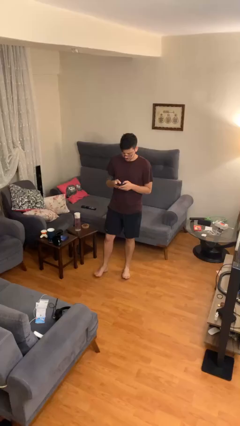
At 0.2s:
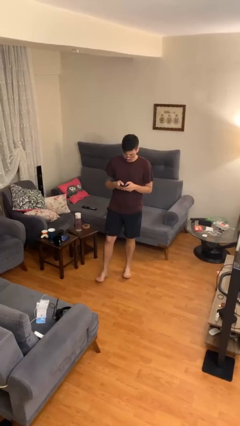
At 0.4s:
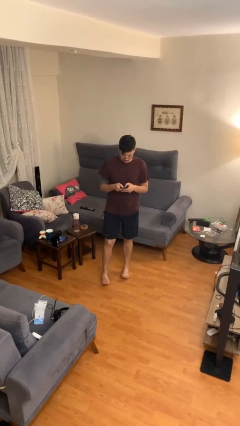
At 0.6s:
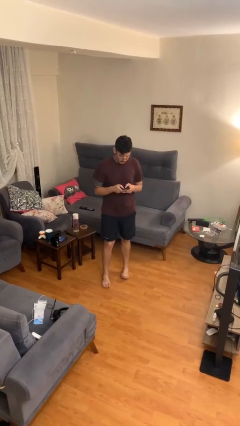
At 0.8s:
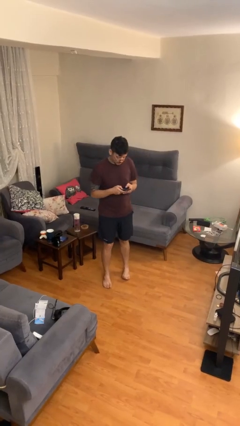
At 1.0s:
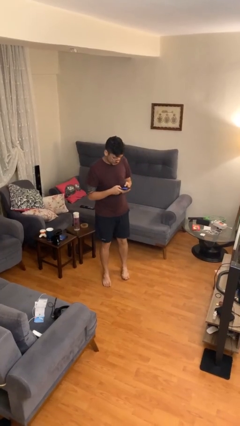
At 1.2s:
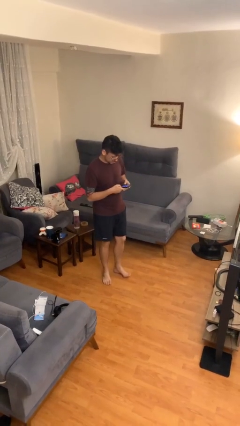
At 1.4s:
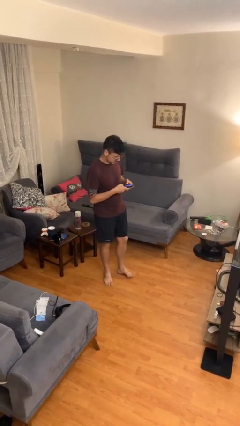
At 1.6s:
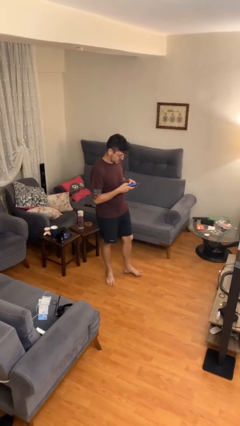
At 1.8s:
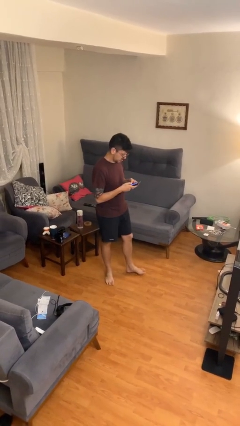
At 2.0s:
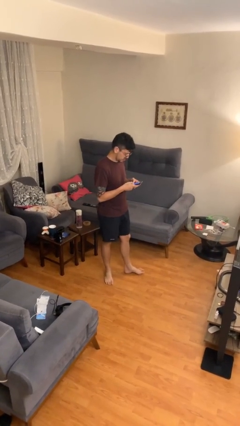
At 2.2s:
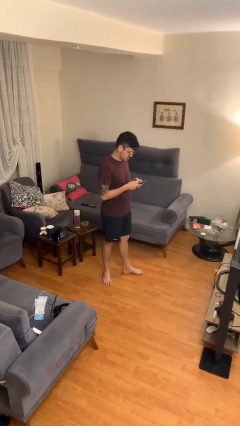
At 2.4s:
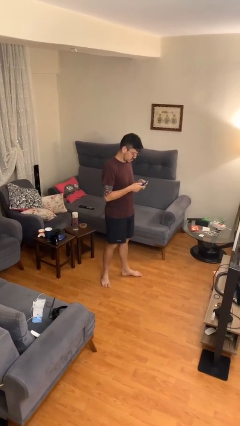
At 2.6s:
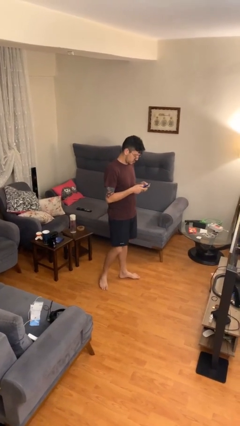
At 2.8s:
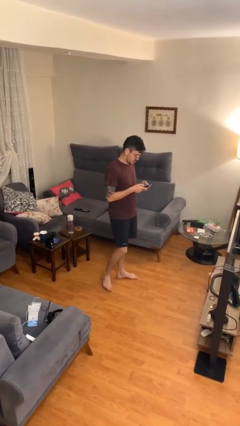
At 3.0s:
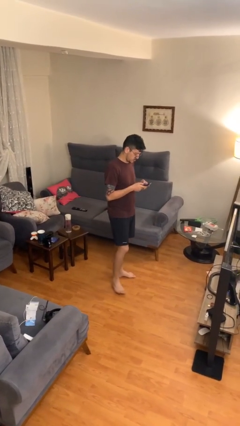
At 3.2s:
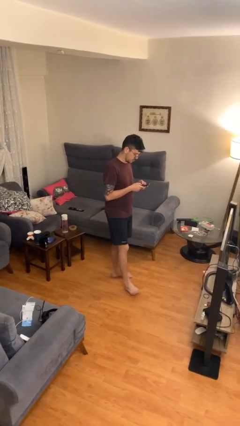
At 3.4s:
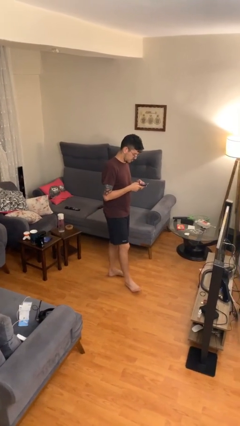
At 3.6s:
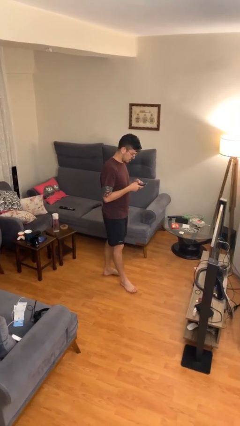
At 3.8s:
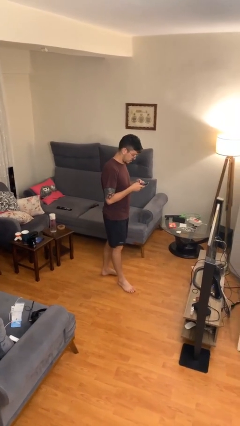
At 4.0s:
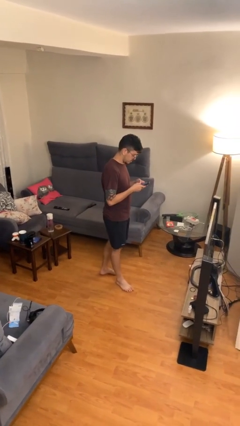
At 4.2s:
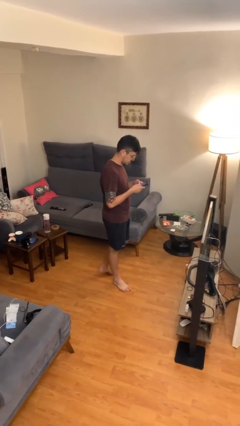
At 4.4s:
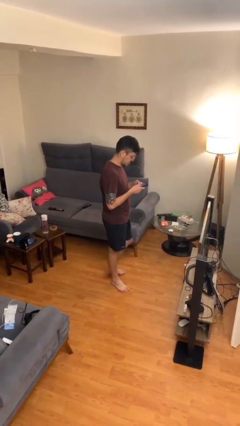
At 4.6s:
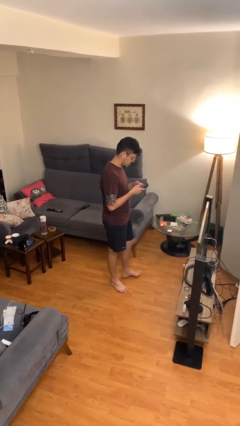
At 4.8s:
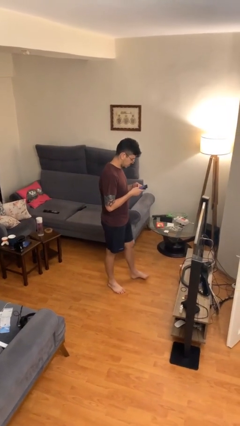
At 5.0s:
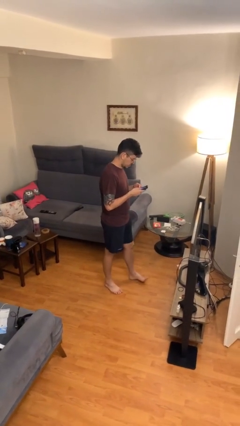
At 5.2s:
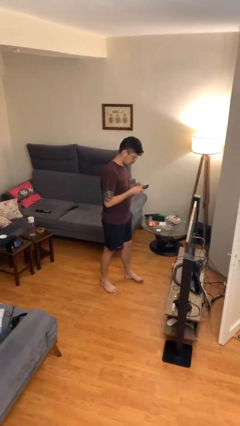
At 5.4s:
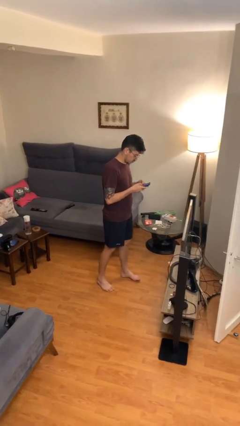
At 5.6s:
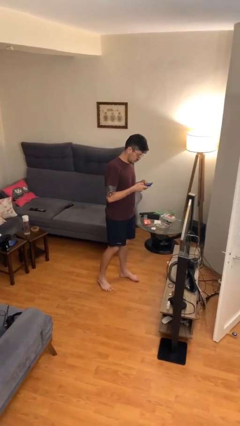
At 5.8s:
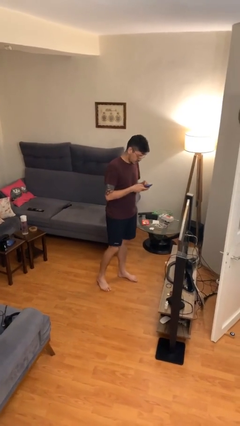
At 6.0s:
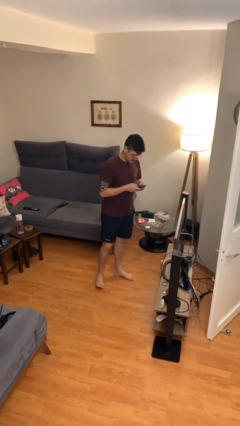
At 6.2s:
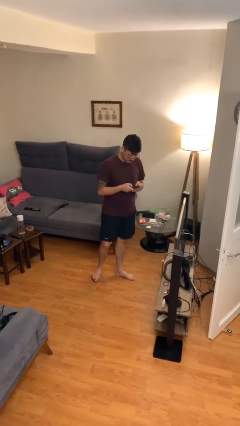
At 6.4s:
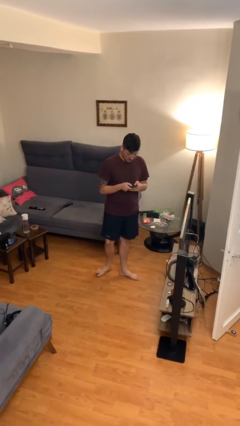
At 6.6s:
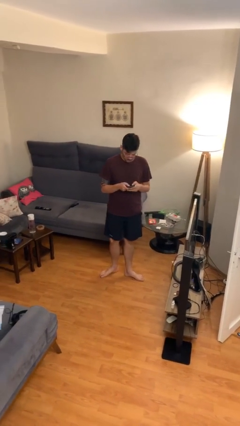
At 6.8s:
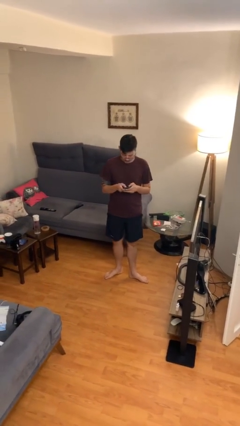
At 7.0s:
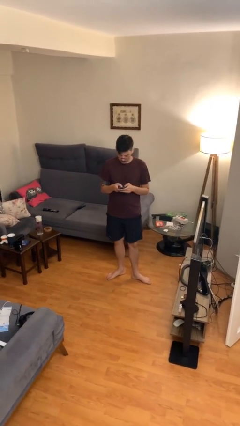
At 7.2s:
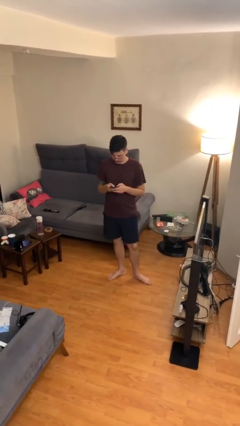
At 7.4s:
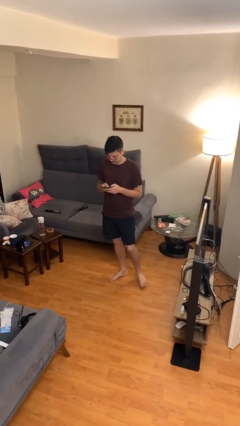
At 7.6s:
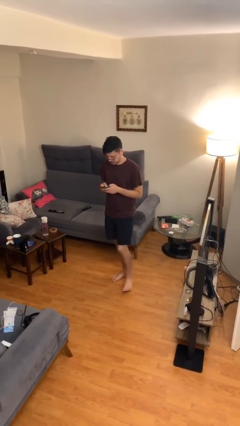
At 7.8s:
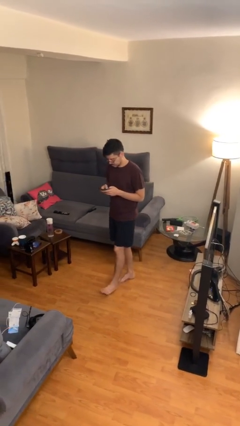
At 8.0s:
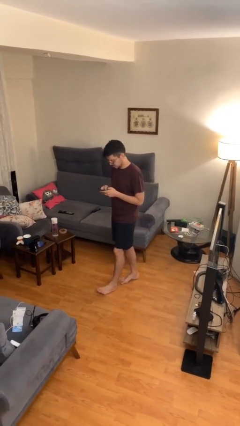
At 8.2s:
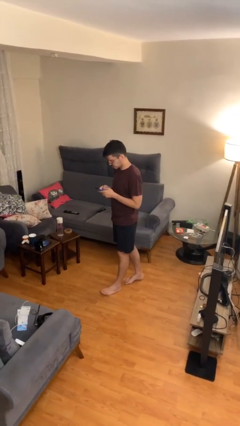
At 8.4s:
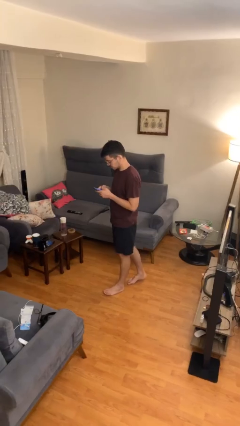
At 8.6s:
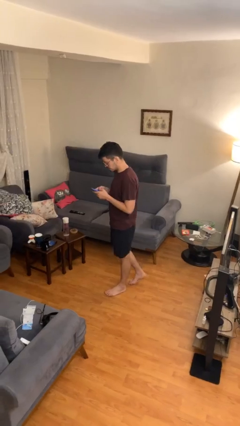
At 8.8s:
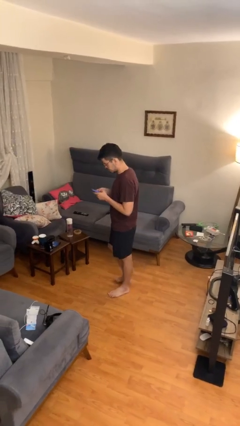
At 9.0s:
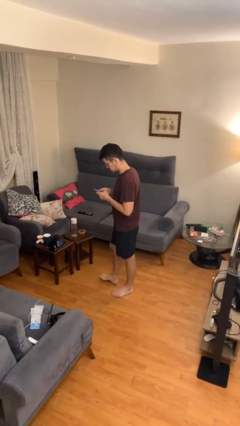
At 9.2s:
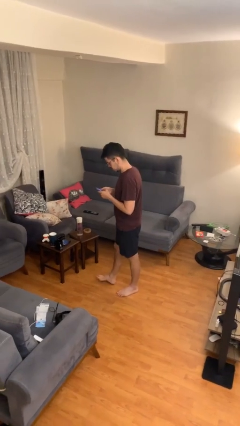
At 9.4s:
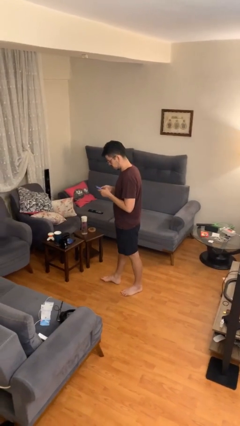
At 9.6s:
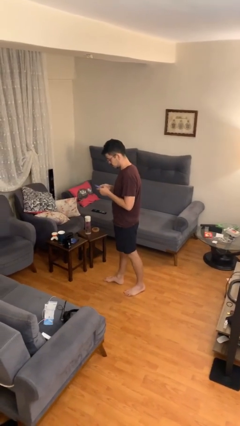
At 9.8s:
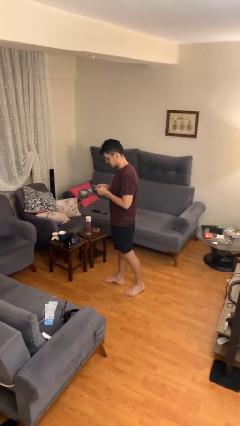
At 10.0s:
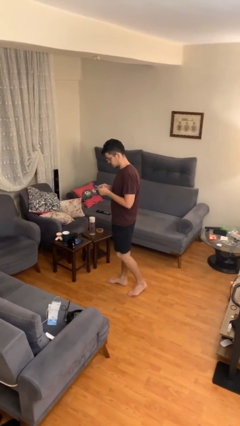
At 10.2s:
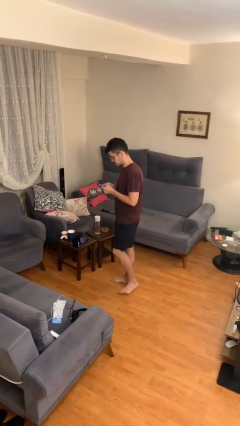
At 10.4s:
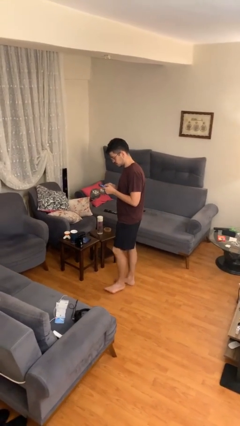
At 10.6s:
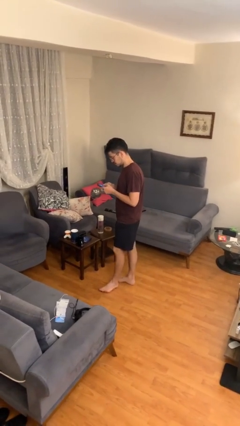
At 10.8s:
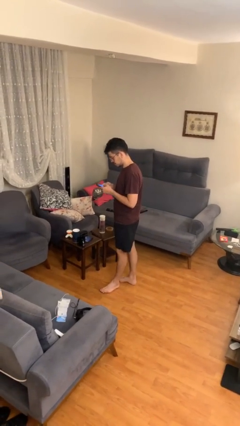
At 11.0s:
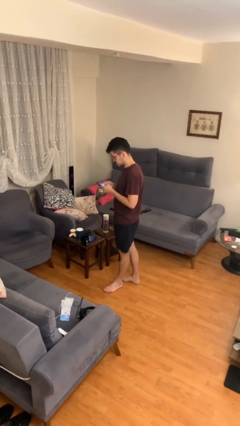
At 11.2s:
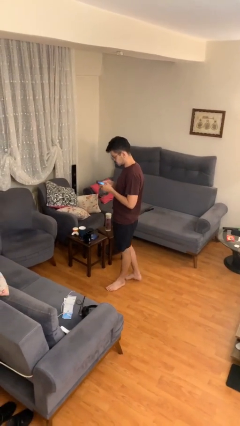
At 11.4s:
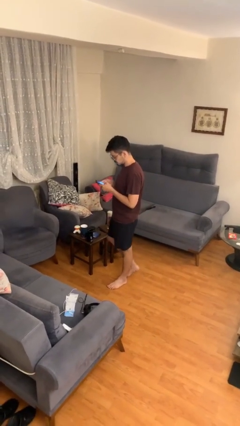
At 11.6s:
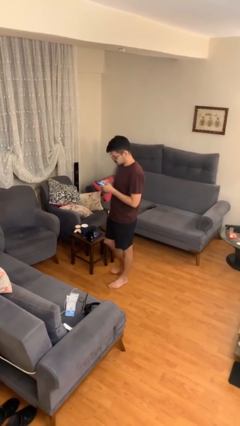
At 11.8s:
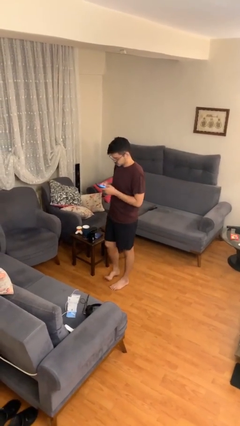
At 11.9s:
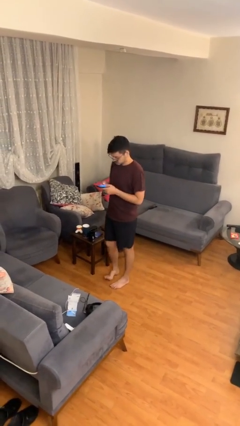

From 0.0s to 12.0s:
person texts on phone

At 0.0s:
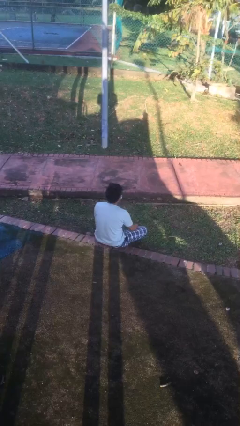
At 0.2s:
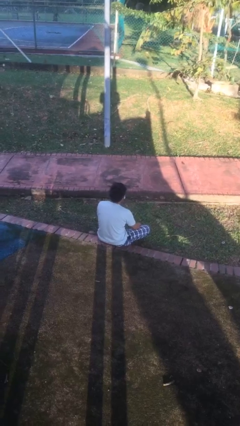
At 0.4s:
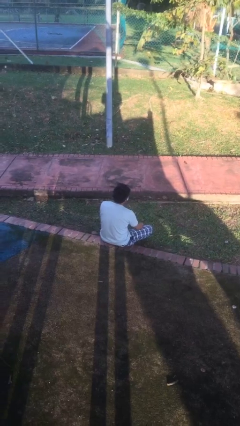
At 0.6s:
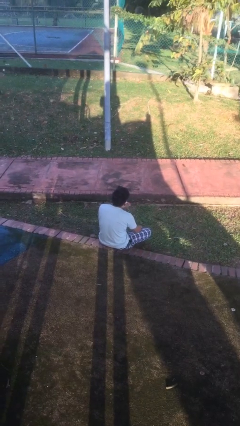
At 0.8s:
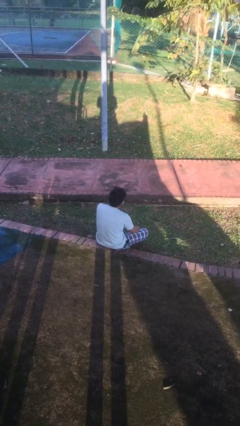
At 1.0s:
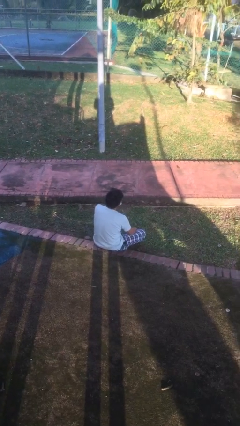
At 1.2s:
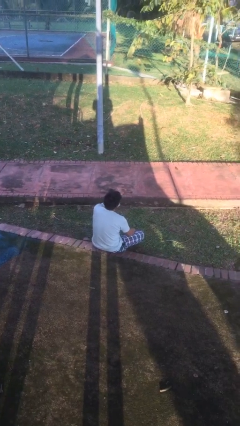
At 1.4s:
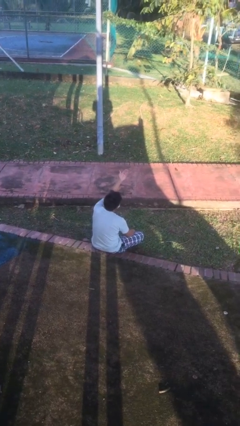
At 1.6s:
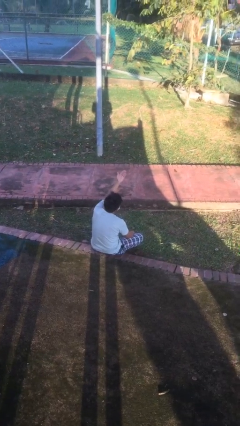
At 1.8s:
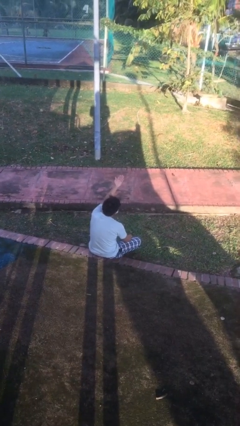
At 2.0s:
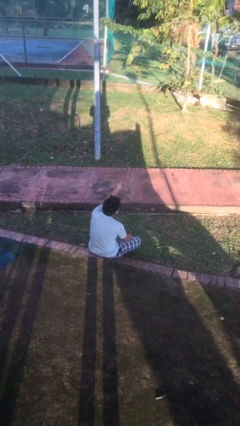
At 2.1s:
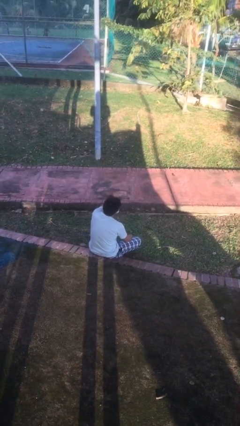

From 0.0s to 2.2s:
person gestures blow kiss

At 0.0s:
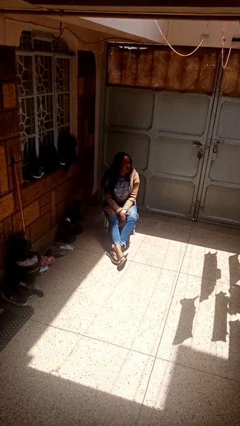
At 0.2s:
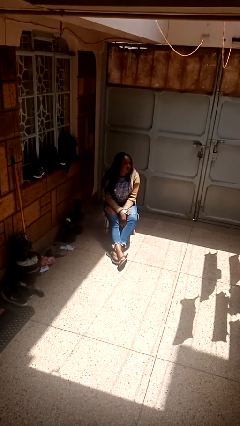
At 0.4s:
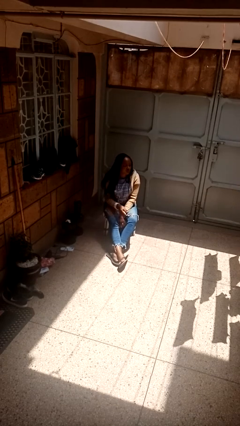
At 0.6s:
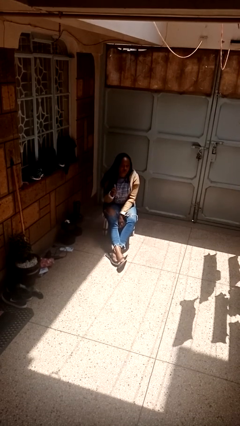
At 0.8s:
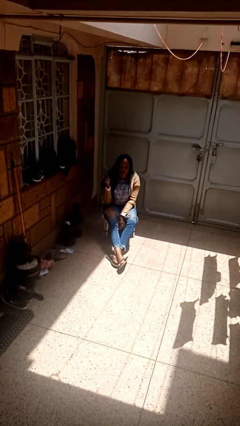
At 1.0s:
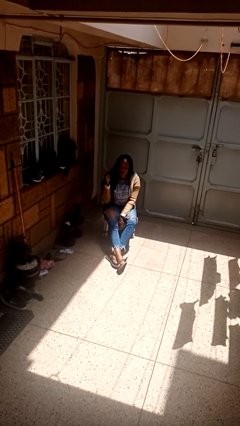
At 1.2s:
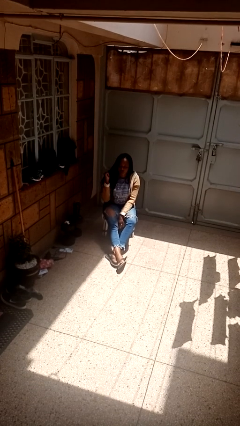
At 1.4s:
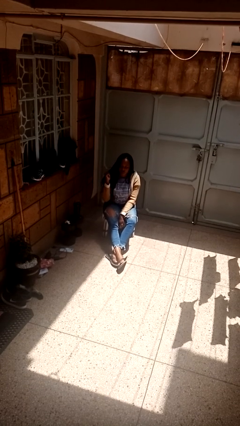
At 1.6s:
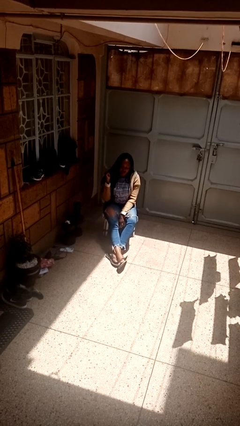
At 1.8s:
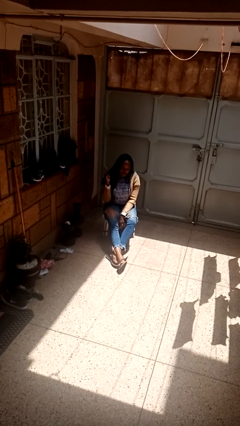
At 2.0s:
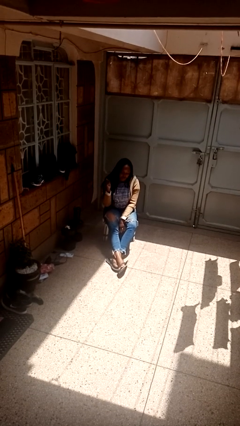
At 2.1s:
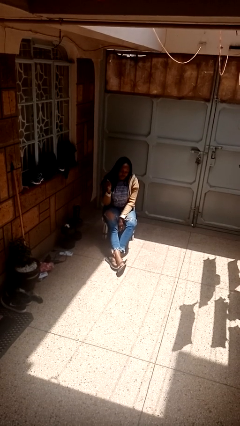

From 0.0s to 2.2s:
person gestures behind me

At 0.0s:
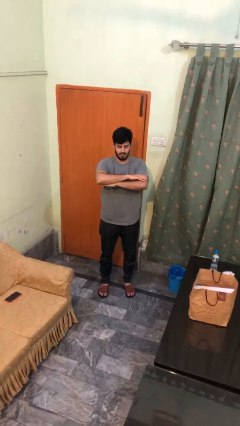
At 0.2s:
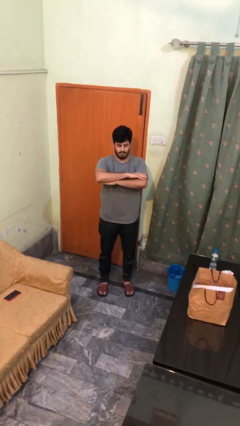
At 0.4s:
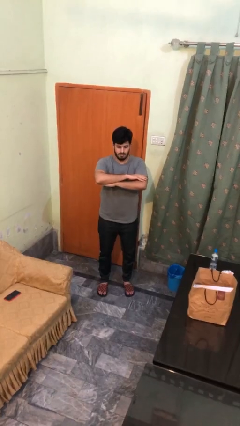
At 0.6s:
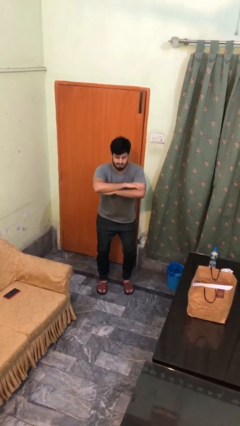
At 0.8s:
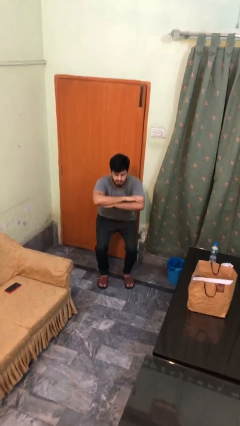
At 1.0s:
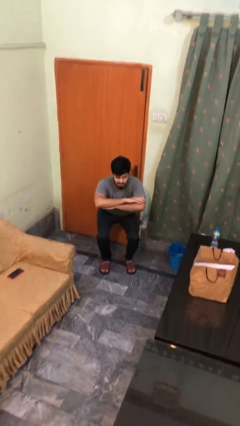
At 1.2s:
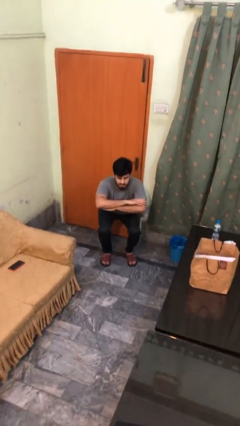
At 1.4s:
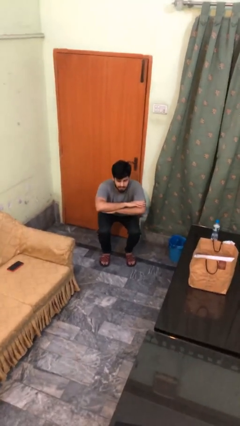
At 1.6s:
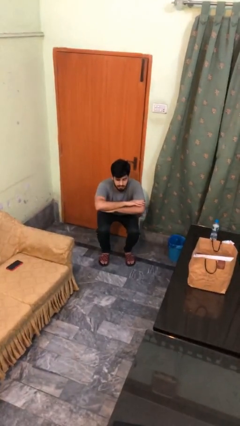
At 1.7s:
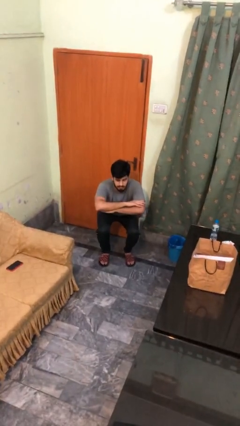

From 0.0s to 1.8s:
person squats
